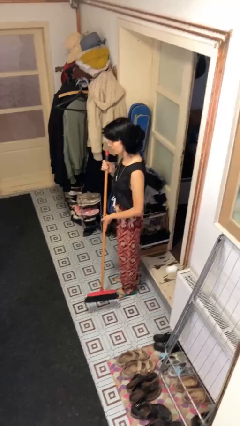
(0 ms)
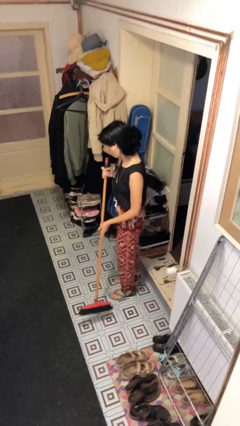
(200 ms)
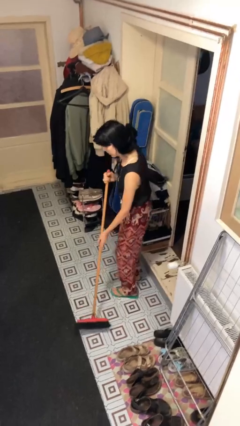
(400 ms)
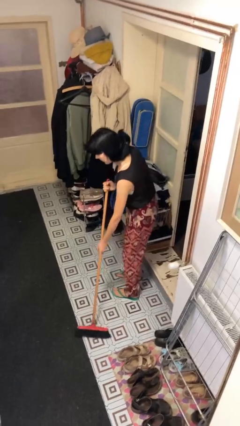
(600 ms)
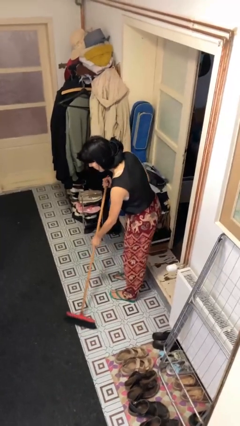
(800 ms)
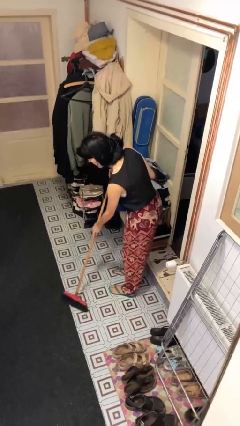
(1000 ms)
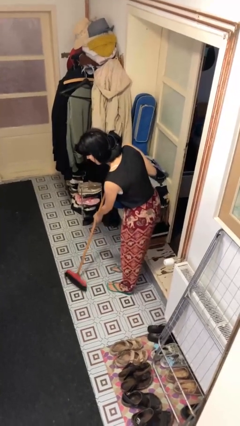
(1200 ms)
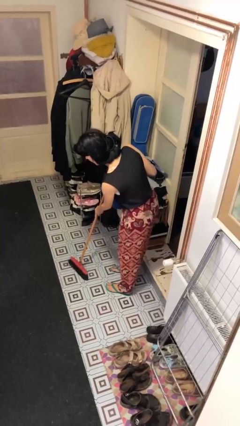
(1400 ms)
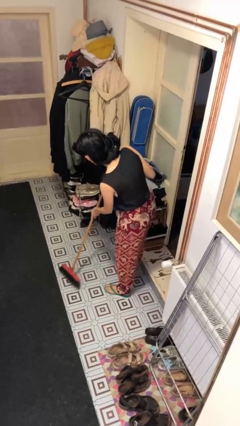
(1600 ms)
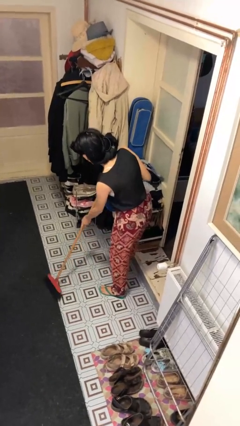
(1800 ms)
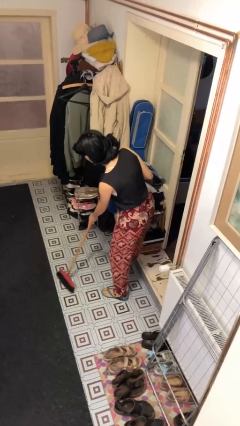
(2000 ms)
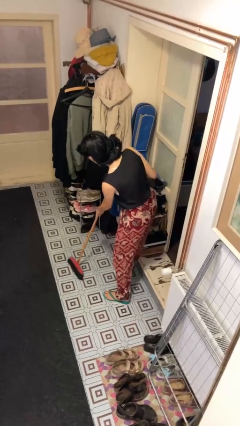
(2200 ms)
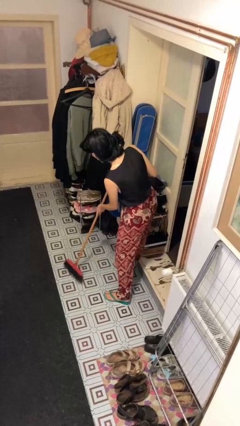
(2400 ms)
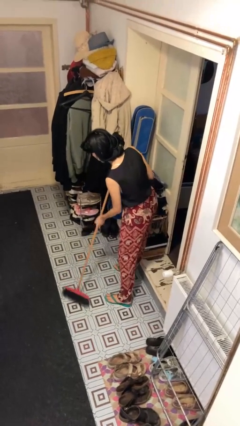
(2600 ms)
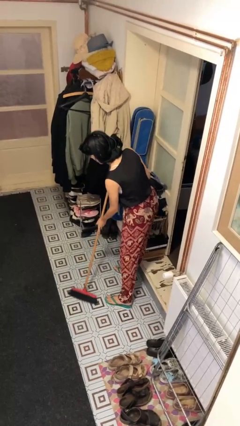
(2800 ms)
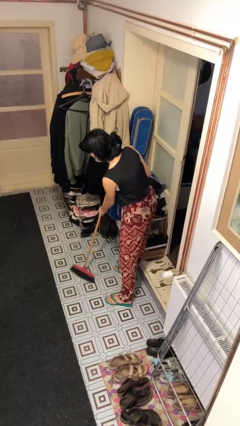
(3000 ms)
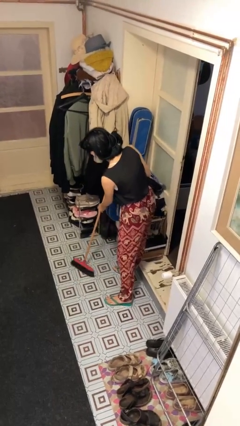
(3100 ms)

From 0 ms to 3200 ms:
person sweeps floor

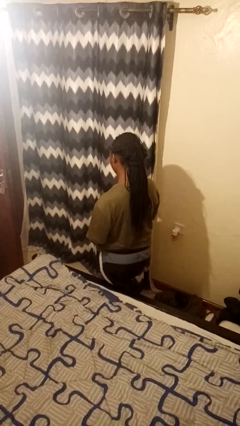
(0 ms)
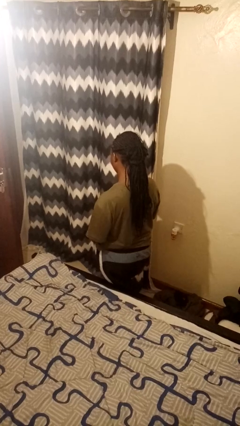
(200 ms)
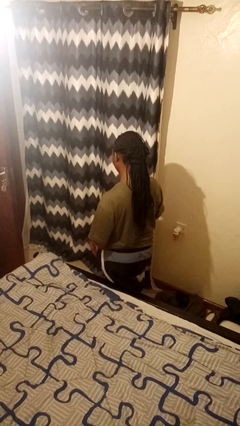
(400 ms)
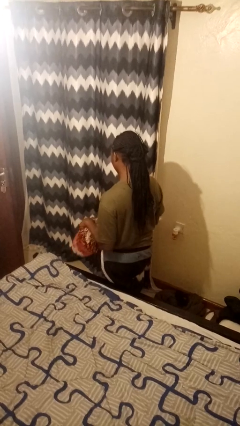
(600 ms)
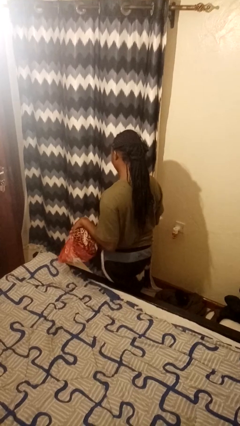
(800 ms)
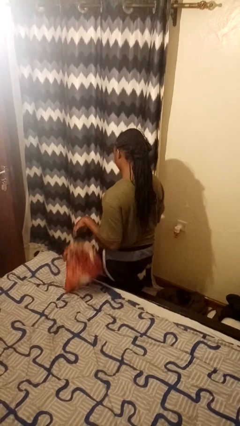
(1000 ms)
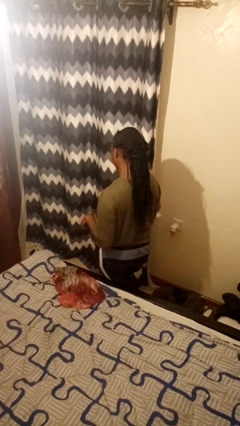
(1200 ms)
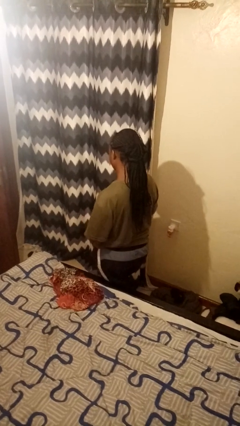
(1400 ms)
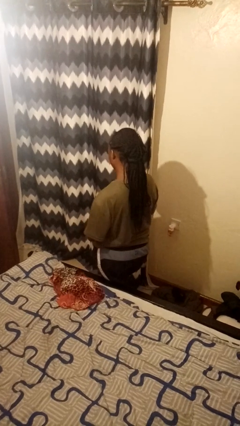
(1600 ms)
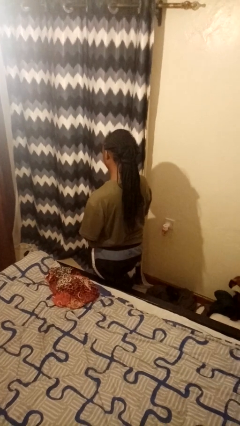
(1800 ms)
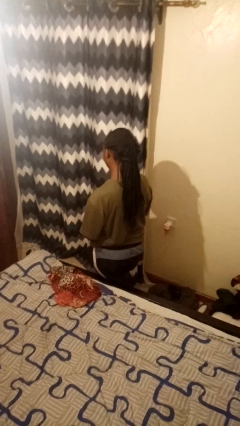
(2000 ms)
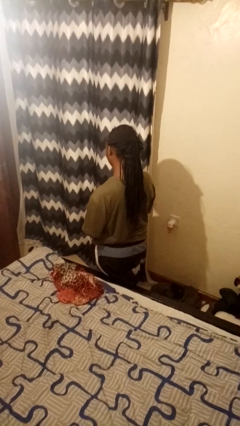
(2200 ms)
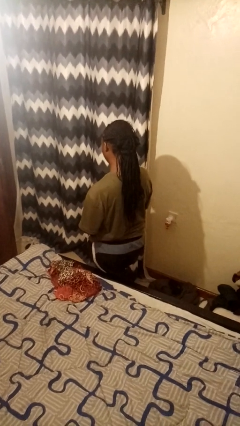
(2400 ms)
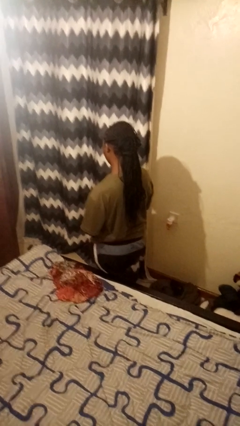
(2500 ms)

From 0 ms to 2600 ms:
person throws object on bed

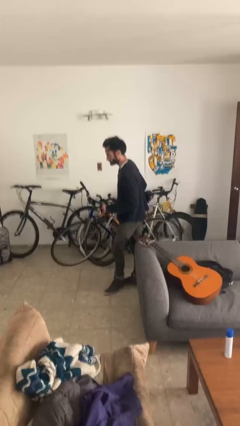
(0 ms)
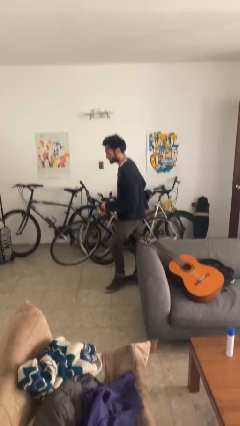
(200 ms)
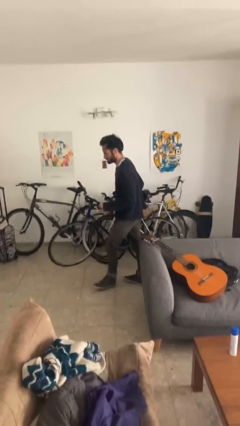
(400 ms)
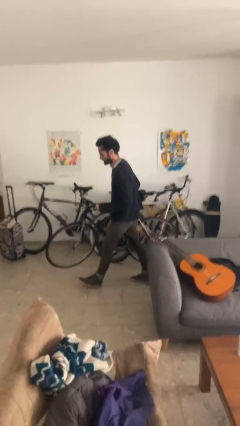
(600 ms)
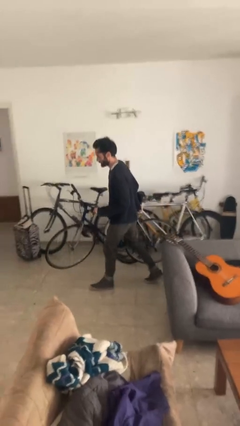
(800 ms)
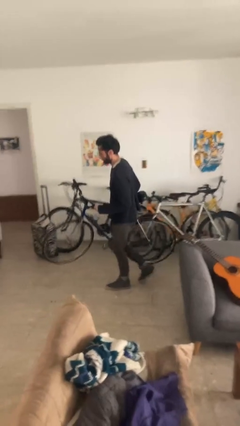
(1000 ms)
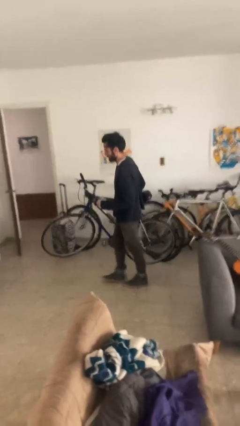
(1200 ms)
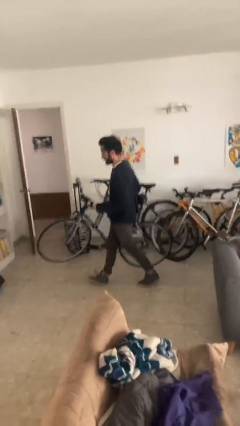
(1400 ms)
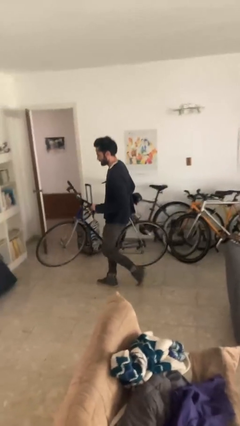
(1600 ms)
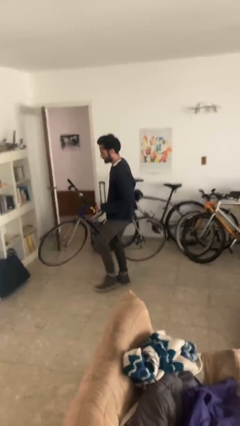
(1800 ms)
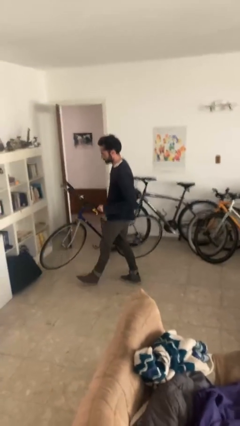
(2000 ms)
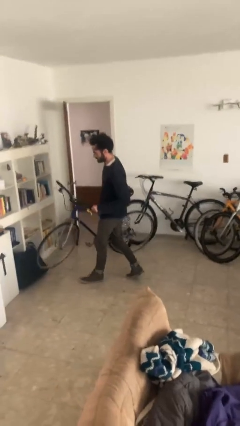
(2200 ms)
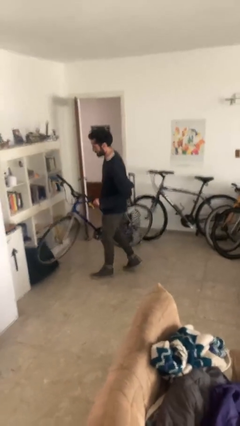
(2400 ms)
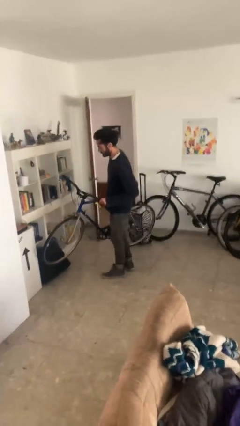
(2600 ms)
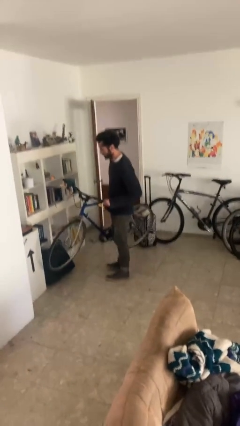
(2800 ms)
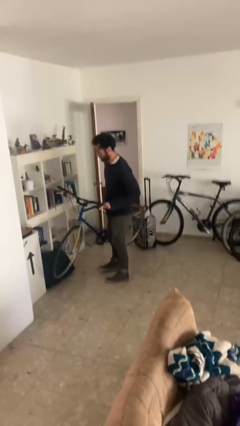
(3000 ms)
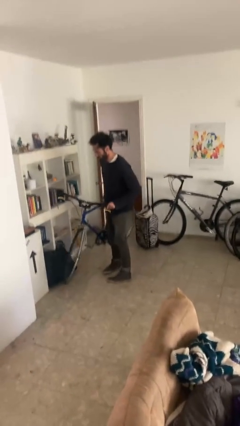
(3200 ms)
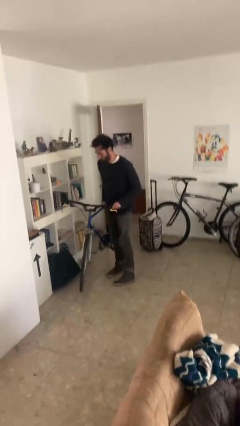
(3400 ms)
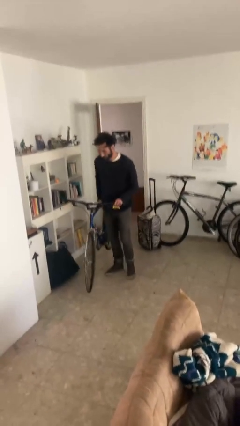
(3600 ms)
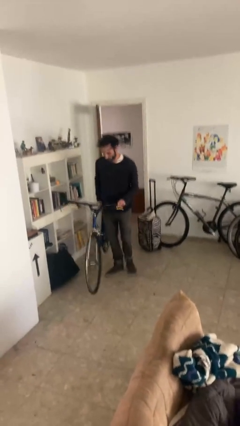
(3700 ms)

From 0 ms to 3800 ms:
person carries bicycle

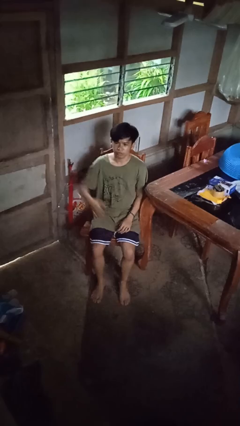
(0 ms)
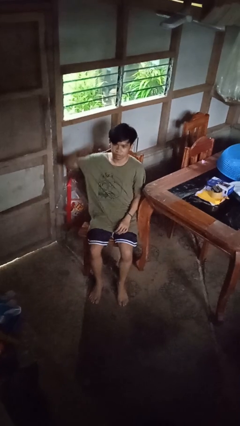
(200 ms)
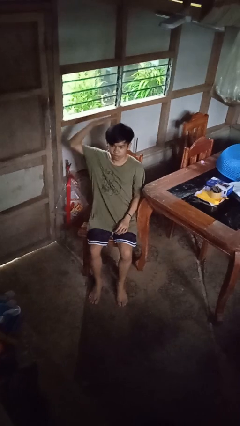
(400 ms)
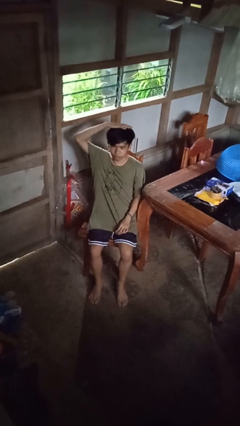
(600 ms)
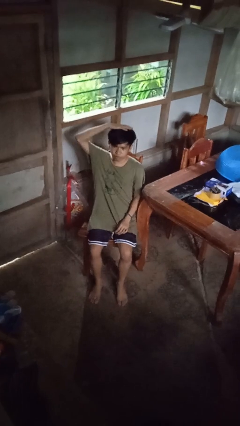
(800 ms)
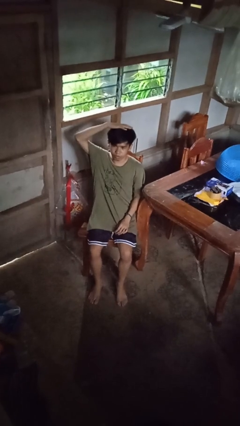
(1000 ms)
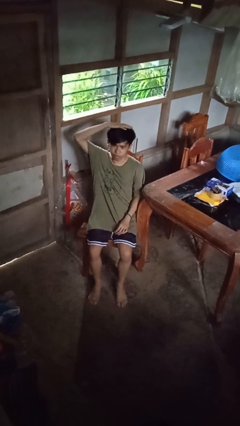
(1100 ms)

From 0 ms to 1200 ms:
person pats head

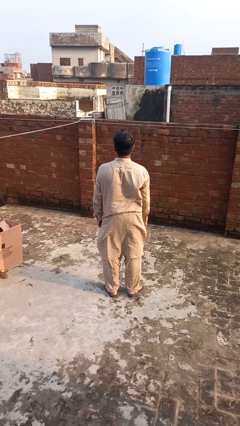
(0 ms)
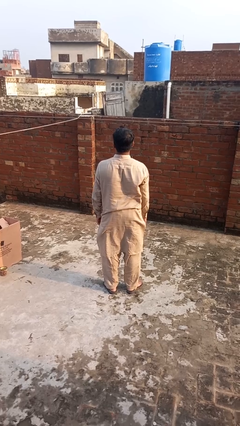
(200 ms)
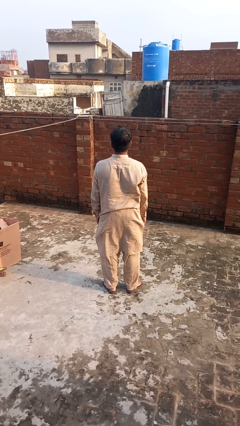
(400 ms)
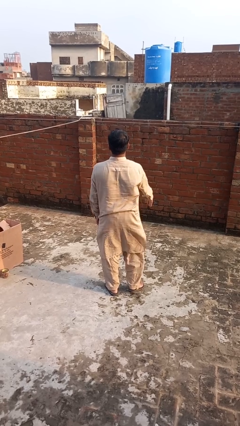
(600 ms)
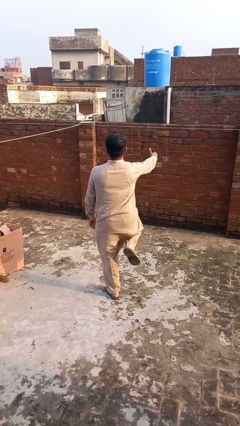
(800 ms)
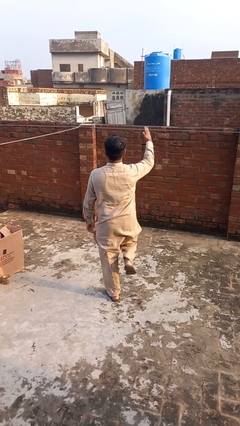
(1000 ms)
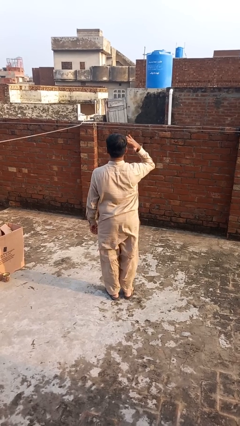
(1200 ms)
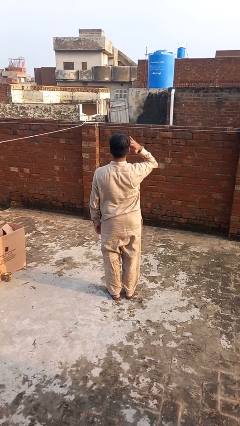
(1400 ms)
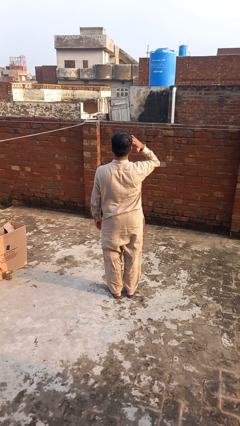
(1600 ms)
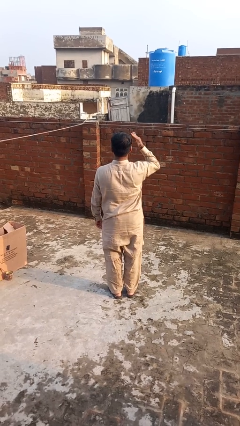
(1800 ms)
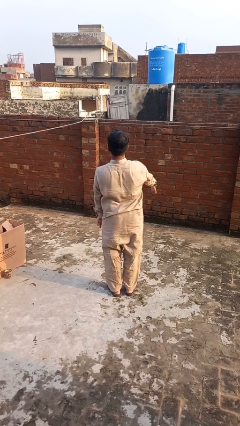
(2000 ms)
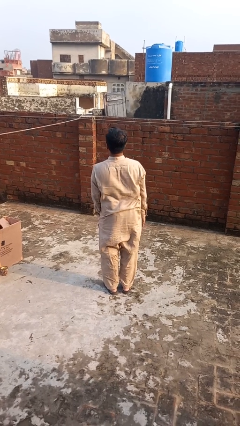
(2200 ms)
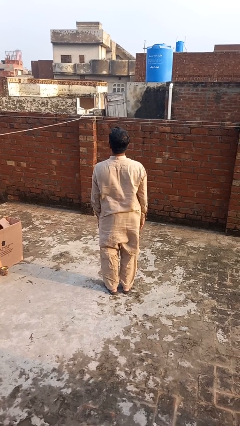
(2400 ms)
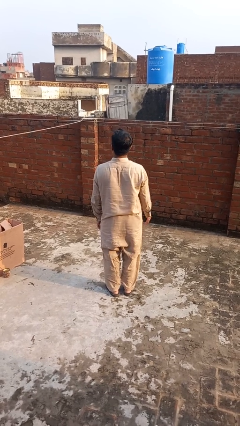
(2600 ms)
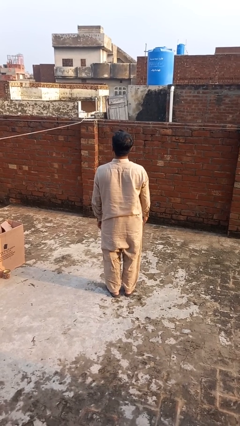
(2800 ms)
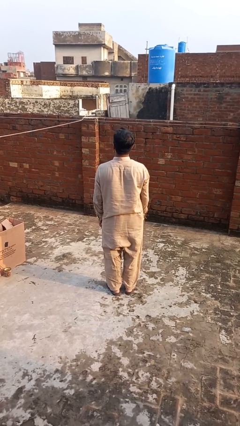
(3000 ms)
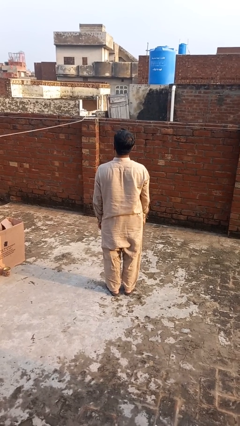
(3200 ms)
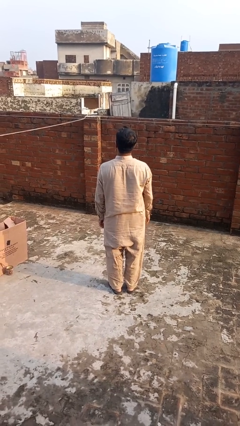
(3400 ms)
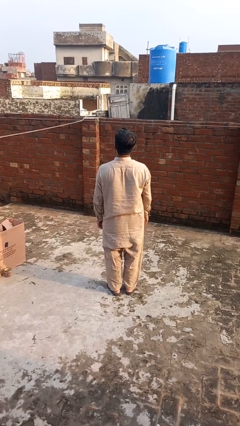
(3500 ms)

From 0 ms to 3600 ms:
person salutes

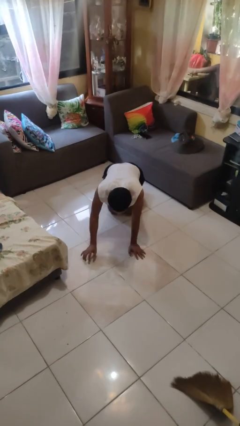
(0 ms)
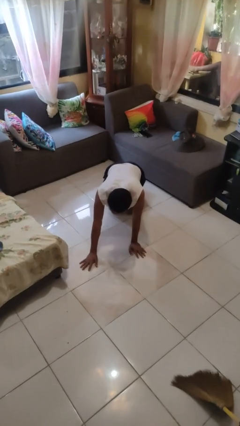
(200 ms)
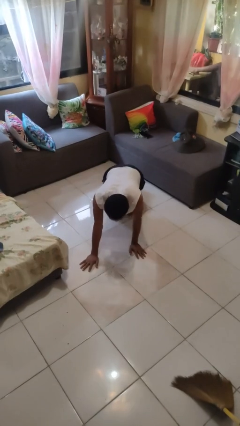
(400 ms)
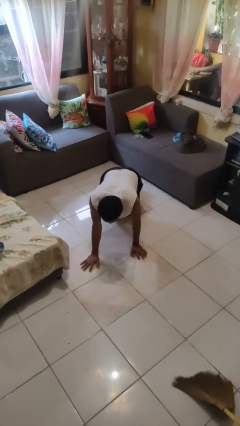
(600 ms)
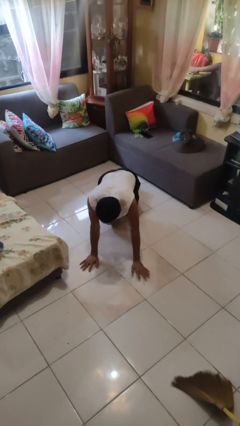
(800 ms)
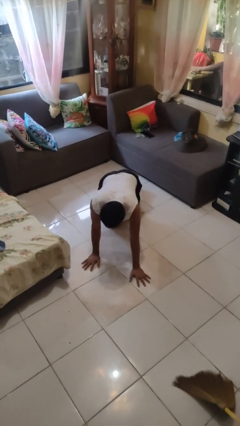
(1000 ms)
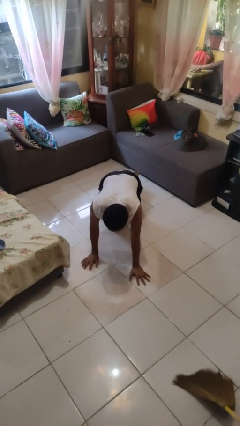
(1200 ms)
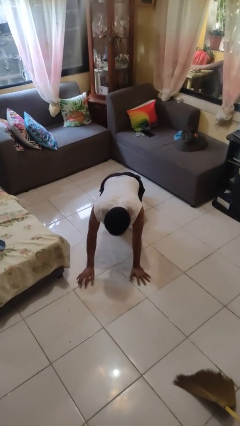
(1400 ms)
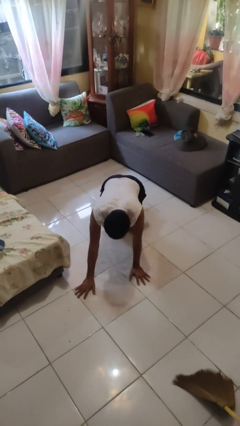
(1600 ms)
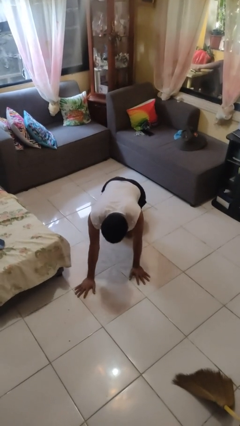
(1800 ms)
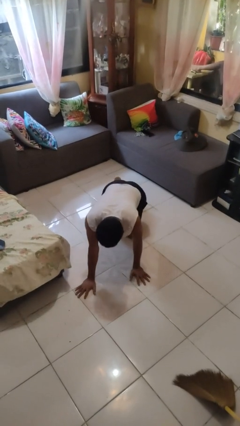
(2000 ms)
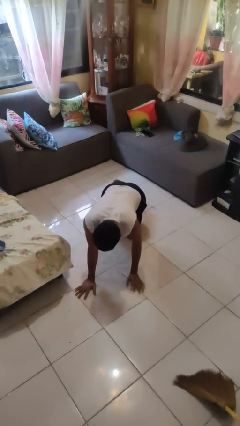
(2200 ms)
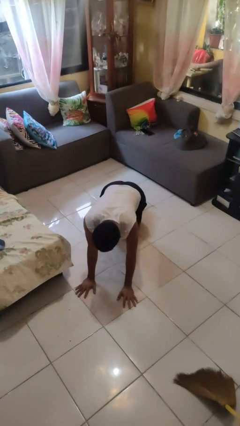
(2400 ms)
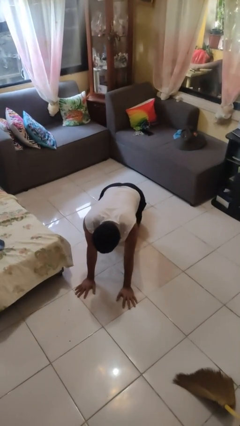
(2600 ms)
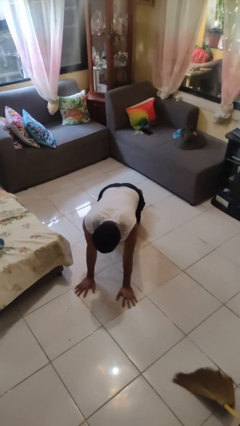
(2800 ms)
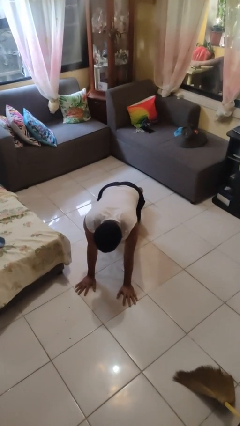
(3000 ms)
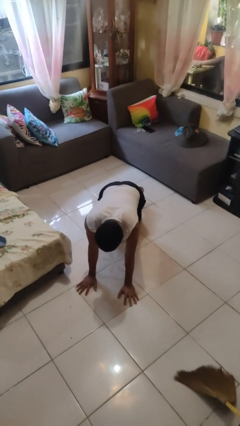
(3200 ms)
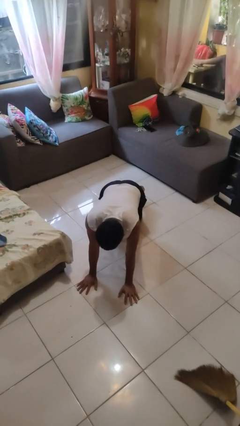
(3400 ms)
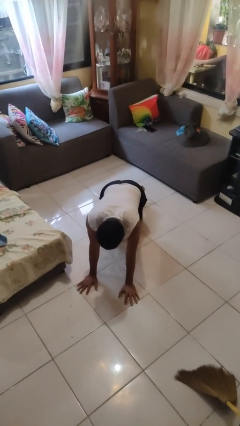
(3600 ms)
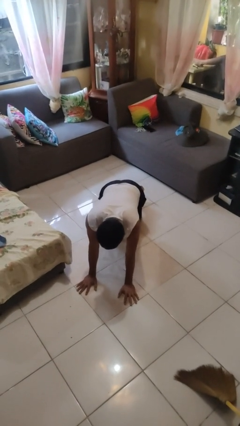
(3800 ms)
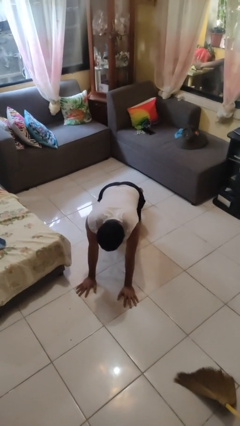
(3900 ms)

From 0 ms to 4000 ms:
person crawls
